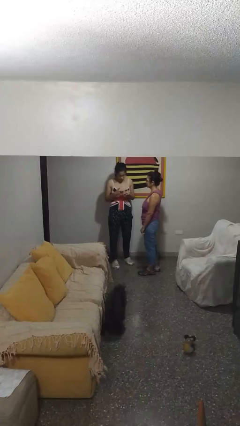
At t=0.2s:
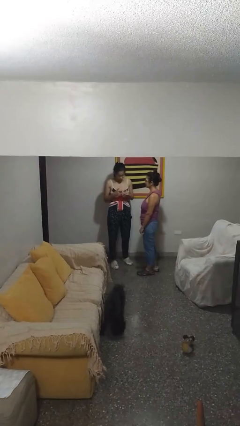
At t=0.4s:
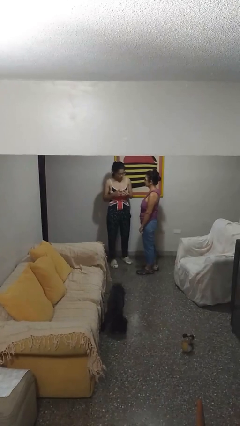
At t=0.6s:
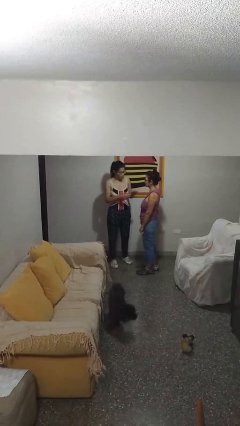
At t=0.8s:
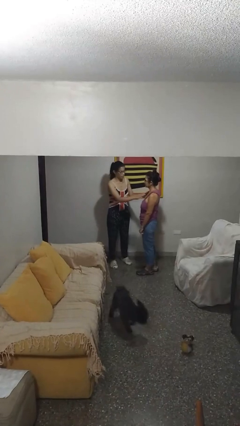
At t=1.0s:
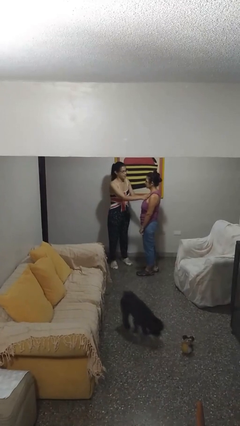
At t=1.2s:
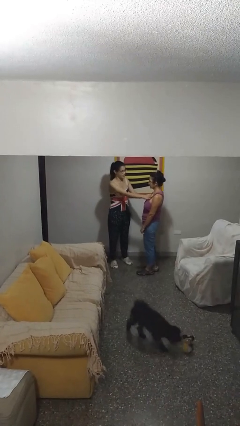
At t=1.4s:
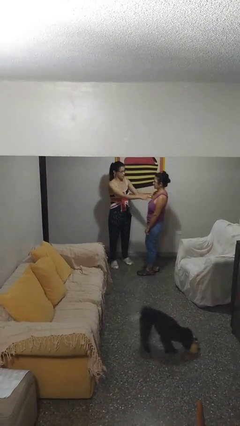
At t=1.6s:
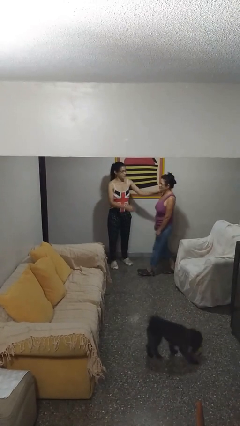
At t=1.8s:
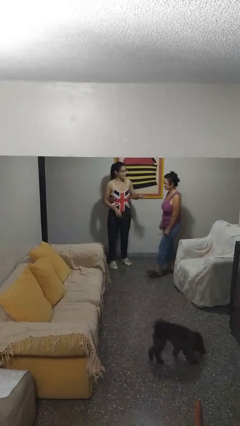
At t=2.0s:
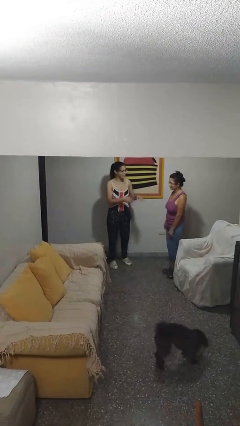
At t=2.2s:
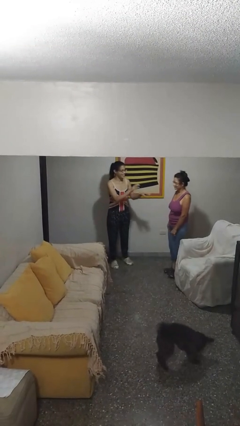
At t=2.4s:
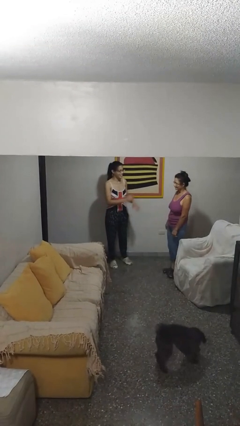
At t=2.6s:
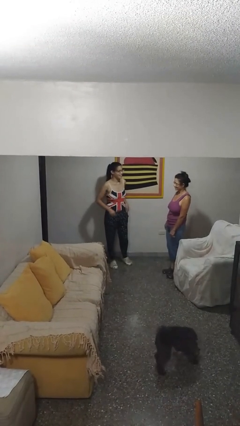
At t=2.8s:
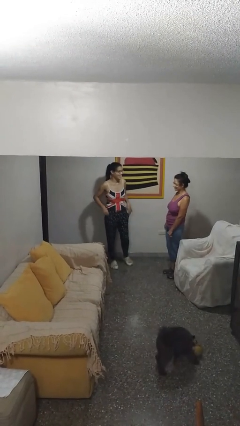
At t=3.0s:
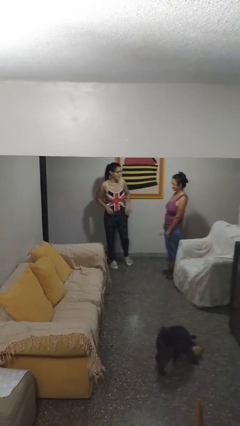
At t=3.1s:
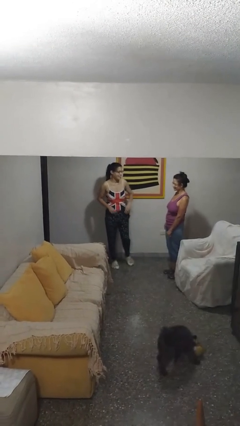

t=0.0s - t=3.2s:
person shoves person

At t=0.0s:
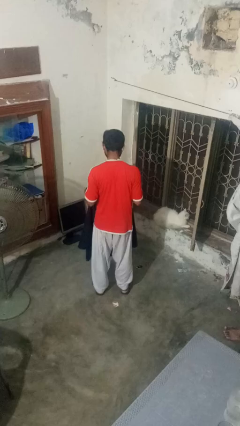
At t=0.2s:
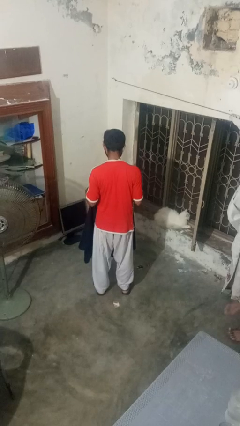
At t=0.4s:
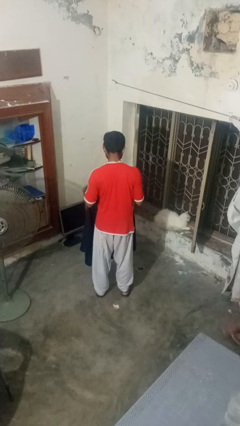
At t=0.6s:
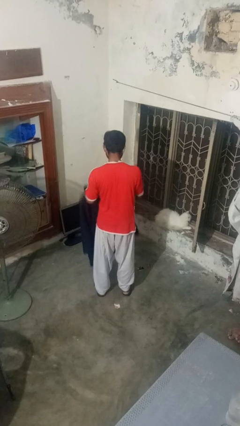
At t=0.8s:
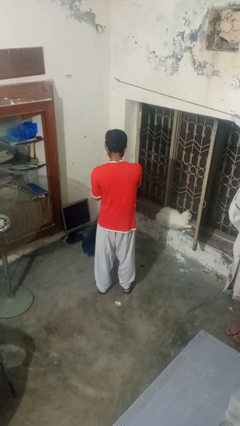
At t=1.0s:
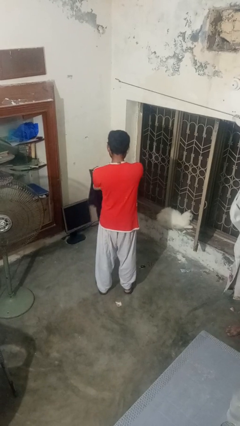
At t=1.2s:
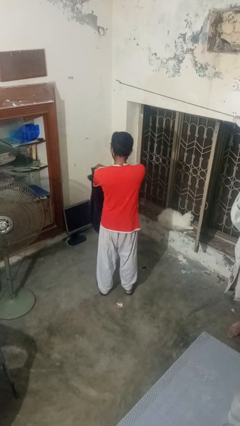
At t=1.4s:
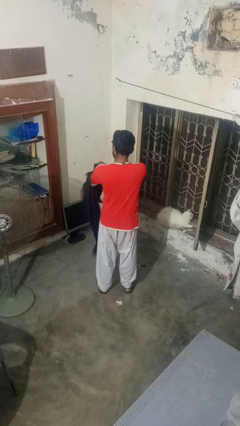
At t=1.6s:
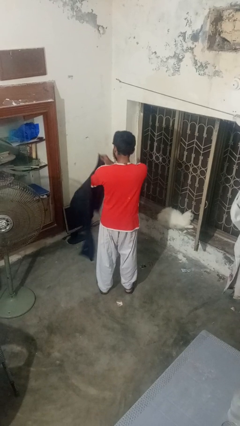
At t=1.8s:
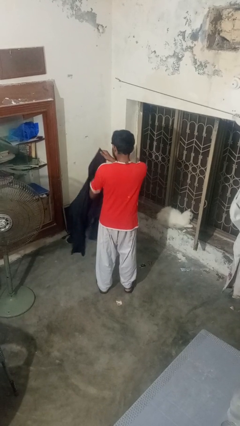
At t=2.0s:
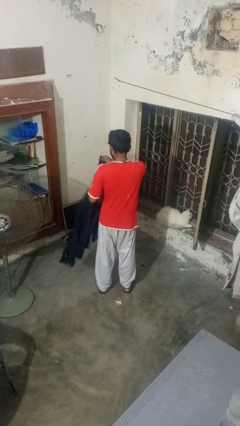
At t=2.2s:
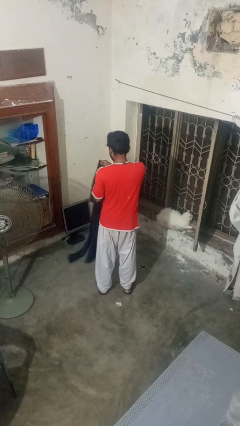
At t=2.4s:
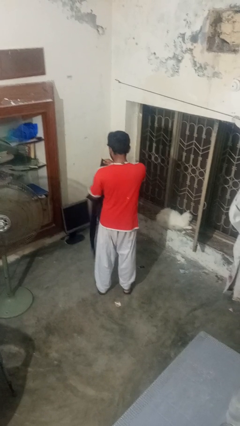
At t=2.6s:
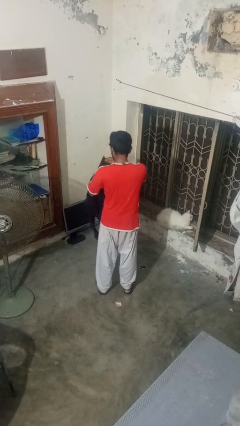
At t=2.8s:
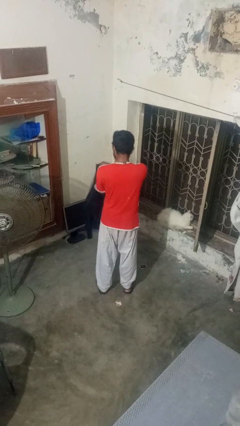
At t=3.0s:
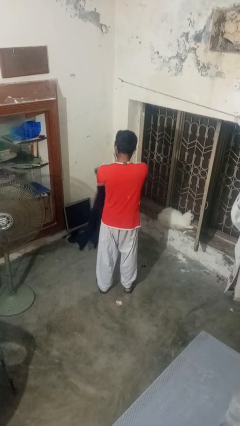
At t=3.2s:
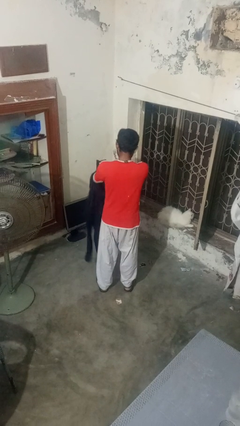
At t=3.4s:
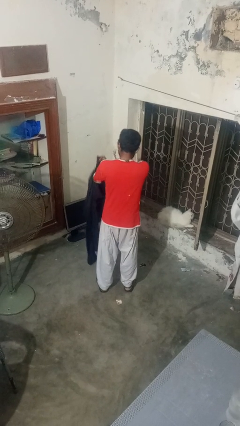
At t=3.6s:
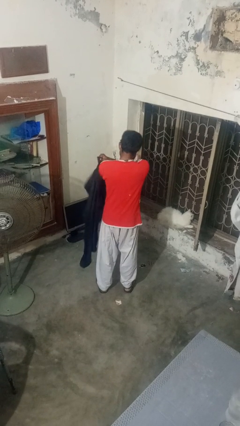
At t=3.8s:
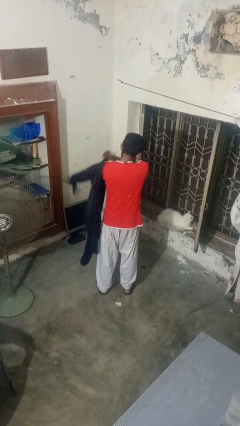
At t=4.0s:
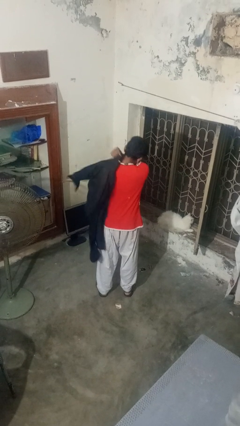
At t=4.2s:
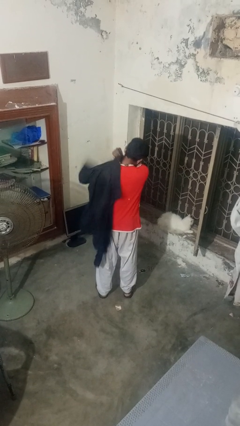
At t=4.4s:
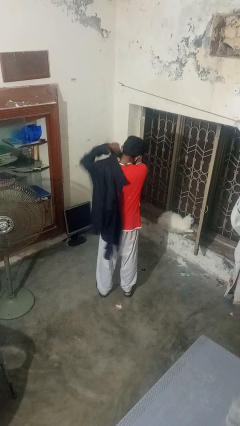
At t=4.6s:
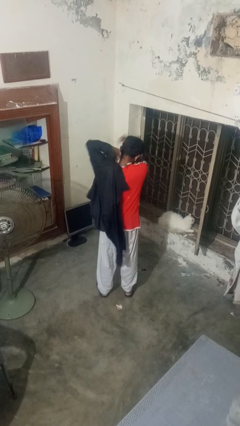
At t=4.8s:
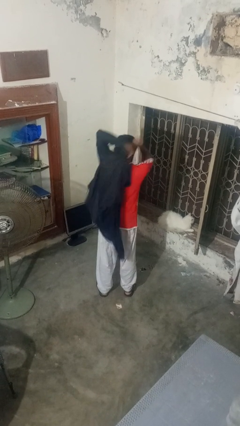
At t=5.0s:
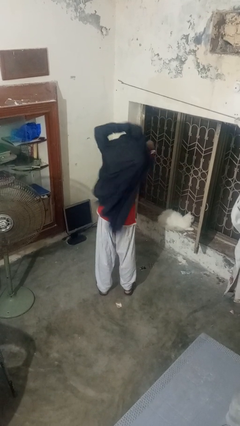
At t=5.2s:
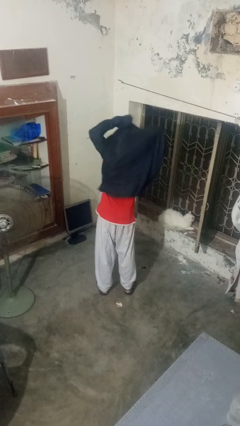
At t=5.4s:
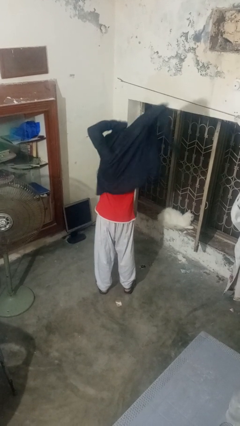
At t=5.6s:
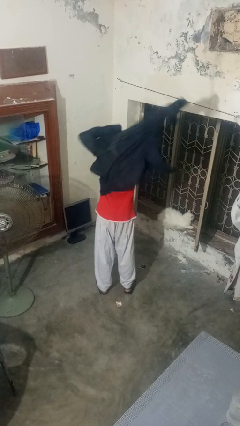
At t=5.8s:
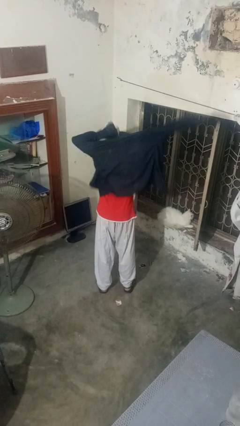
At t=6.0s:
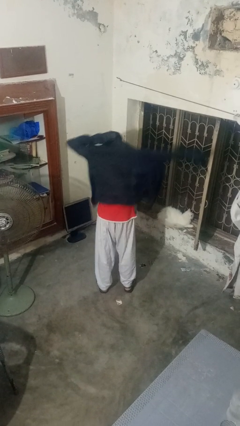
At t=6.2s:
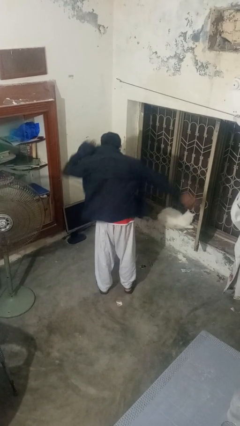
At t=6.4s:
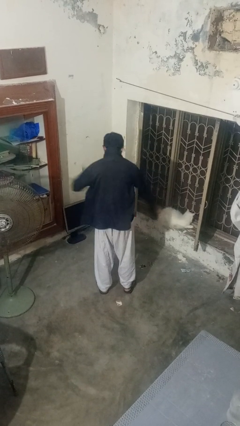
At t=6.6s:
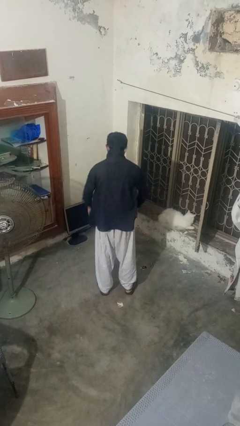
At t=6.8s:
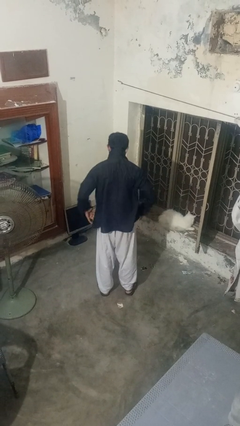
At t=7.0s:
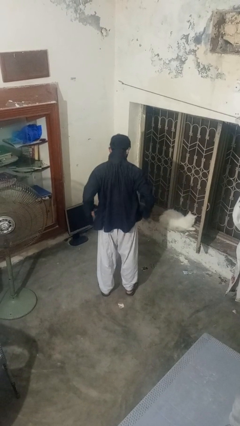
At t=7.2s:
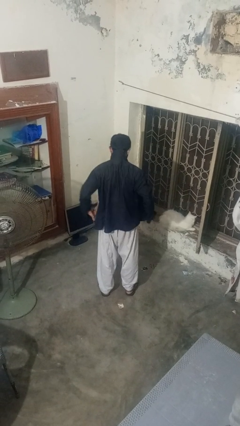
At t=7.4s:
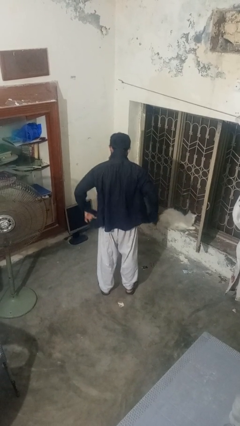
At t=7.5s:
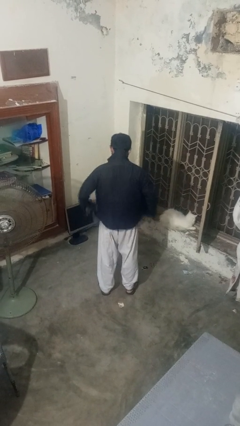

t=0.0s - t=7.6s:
person puts on shirt

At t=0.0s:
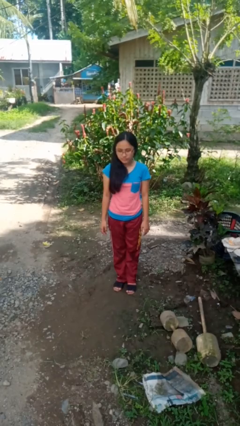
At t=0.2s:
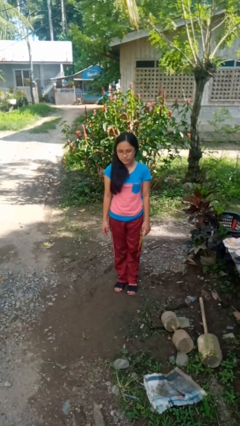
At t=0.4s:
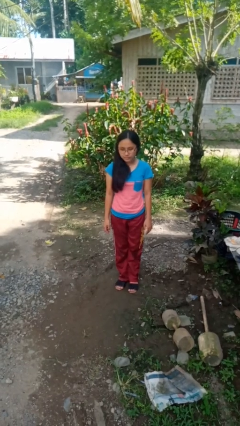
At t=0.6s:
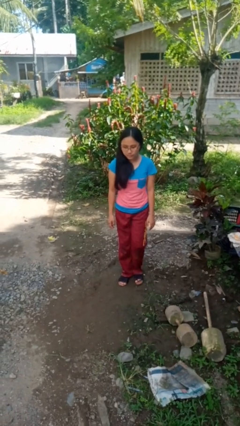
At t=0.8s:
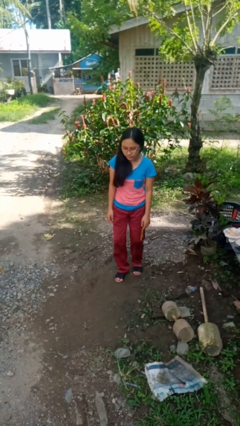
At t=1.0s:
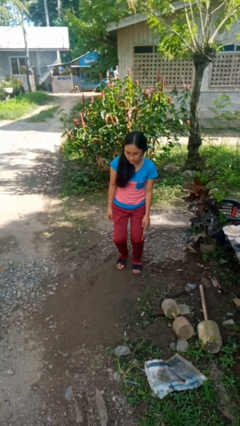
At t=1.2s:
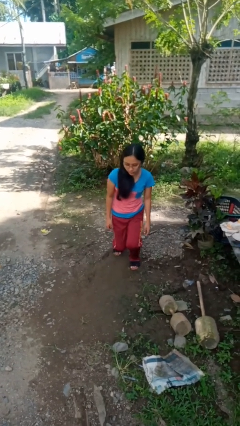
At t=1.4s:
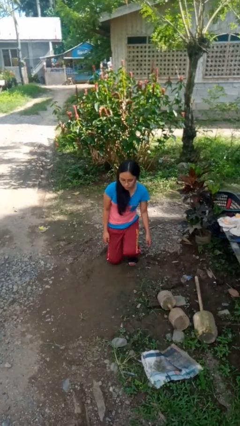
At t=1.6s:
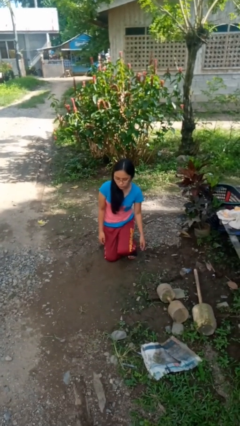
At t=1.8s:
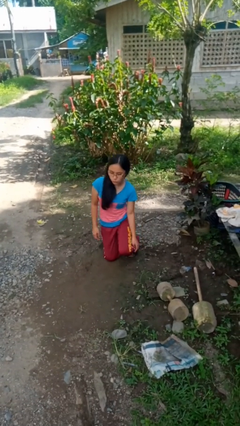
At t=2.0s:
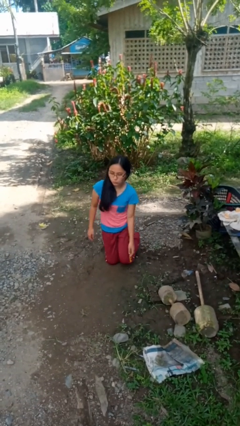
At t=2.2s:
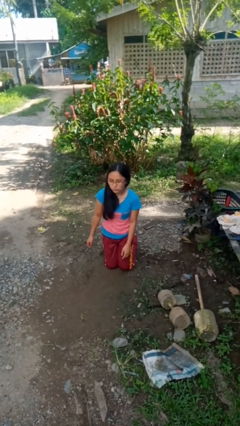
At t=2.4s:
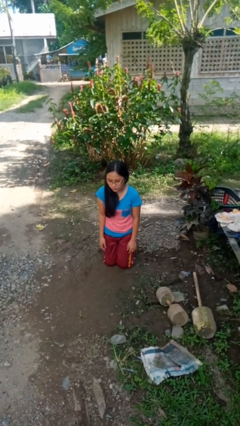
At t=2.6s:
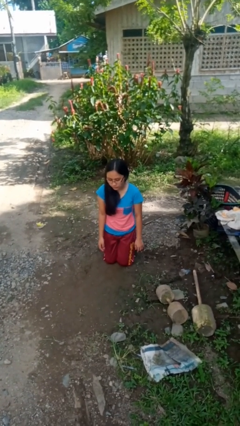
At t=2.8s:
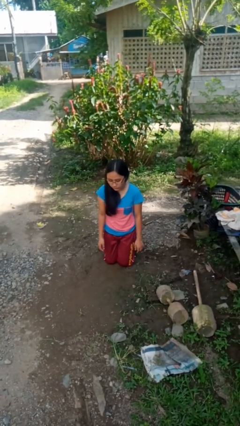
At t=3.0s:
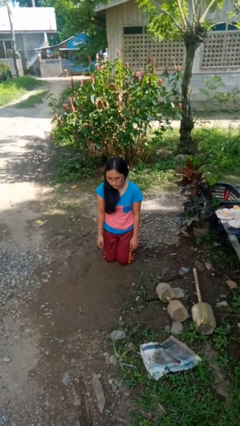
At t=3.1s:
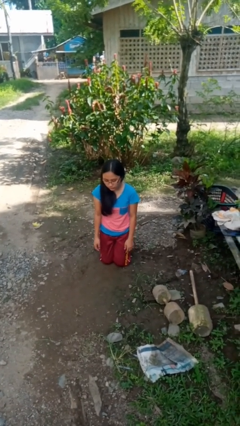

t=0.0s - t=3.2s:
person kneels

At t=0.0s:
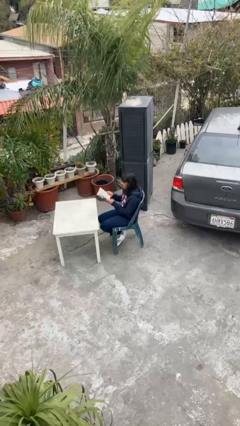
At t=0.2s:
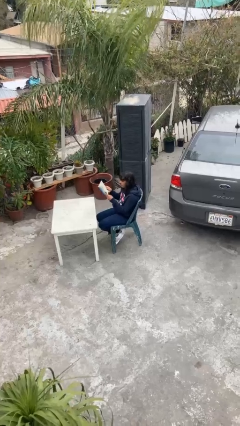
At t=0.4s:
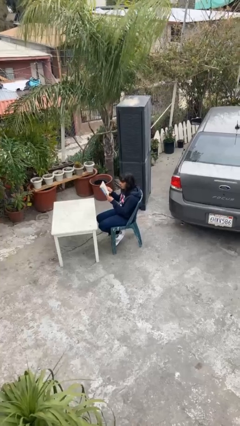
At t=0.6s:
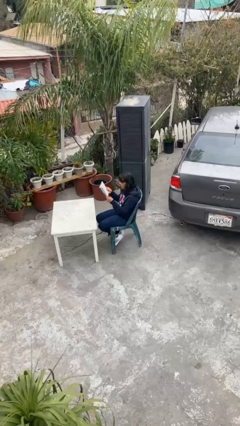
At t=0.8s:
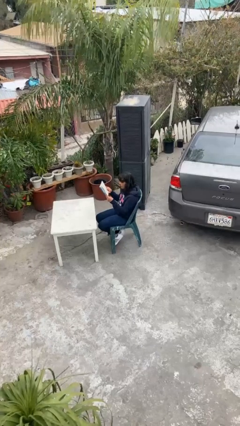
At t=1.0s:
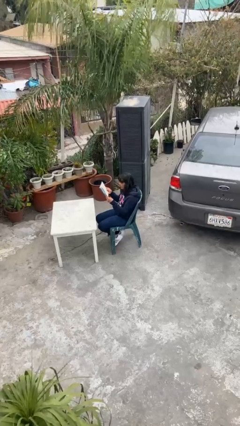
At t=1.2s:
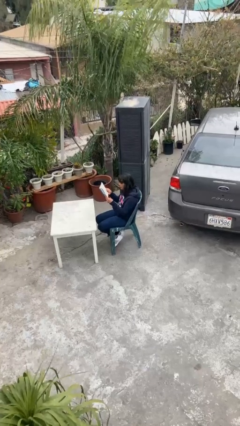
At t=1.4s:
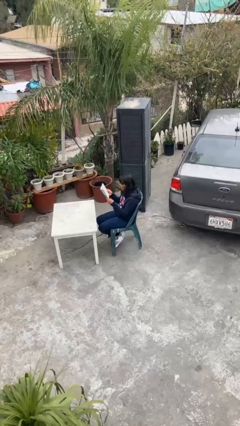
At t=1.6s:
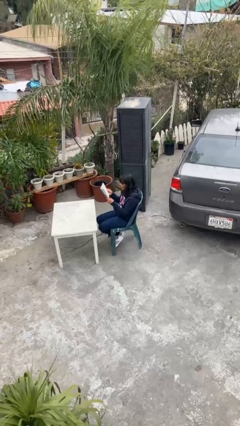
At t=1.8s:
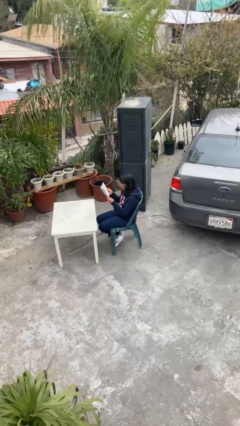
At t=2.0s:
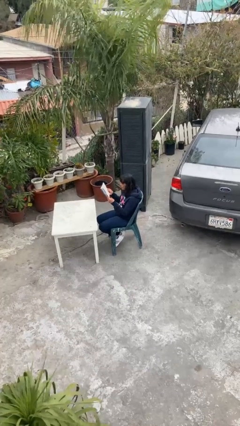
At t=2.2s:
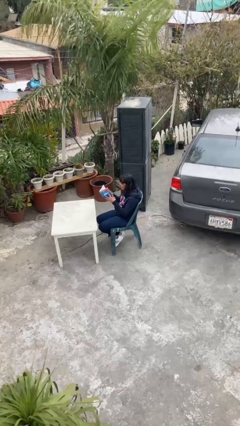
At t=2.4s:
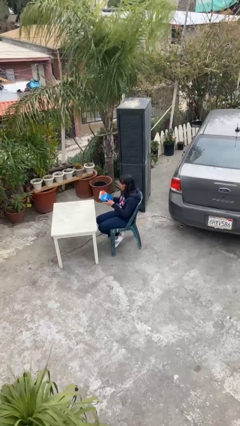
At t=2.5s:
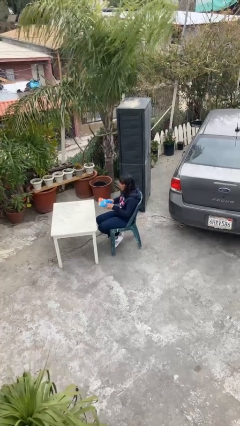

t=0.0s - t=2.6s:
person reads document

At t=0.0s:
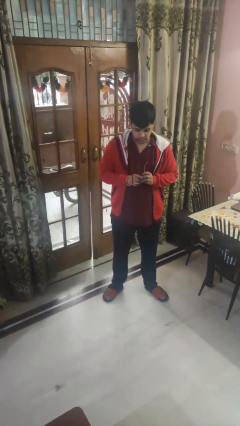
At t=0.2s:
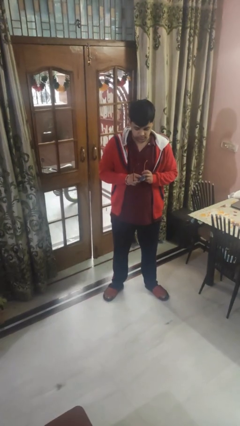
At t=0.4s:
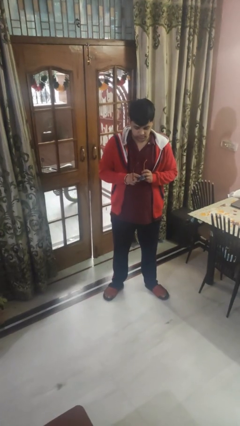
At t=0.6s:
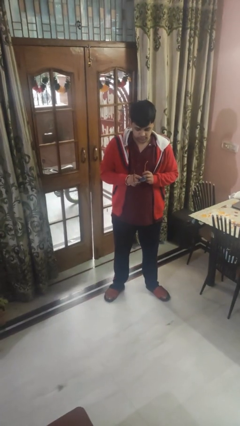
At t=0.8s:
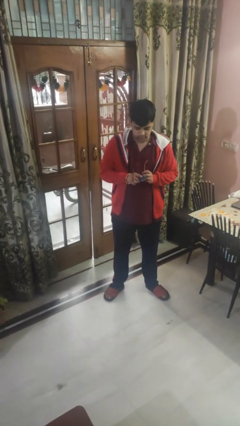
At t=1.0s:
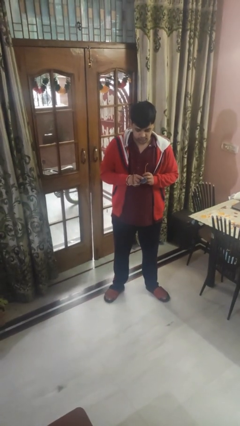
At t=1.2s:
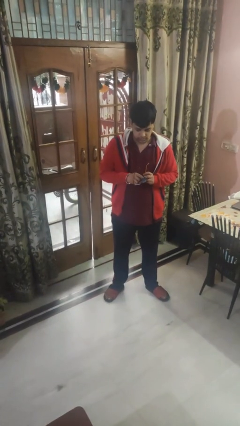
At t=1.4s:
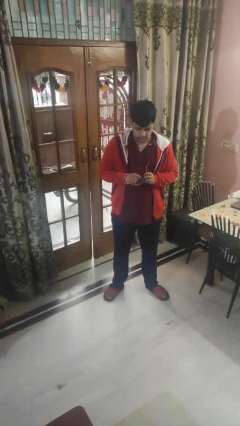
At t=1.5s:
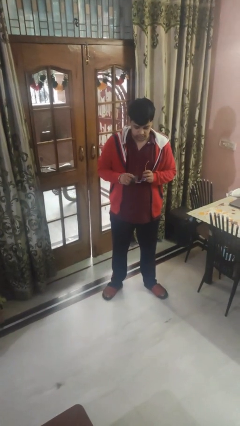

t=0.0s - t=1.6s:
person cleans eyeglasses
